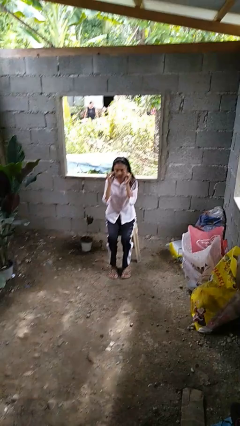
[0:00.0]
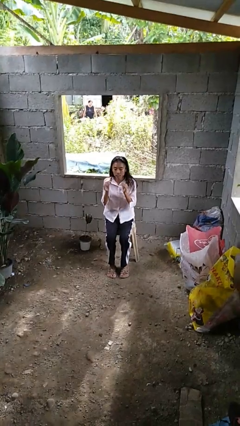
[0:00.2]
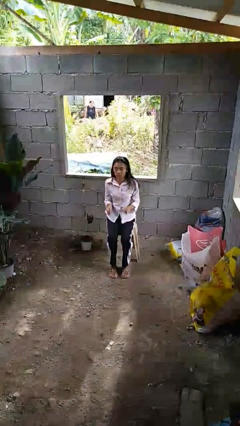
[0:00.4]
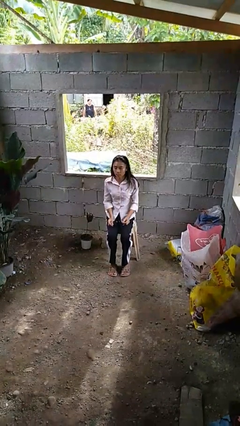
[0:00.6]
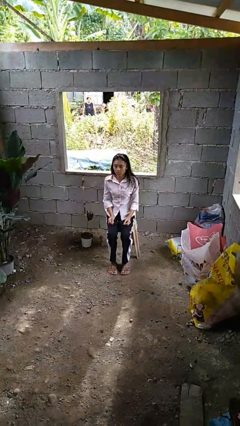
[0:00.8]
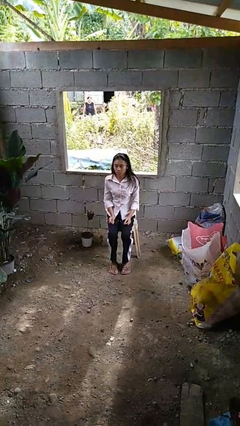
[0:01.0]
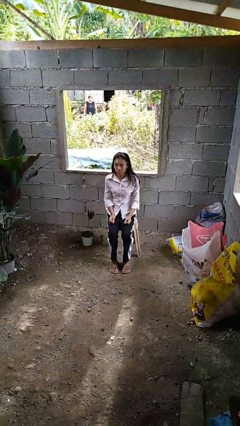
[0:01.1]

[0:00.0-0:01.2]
person takes off glasses

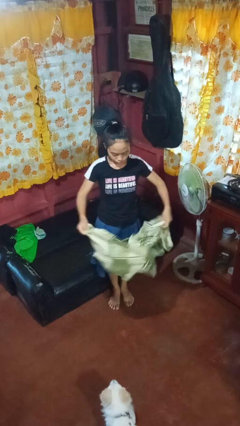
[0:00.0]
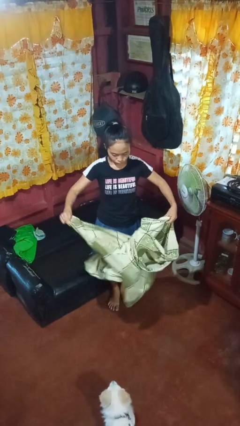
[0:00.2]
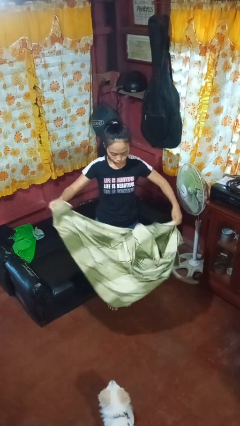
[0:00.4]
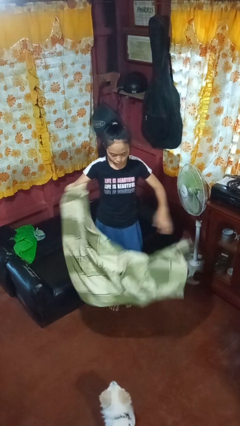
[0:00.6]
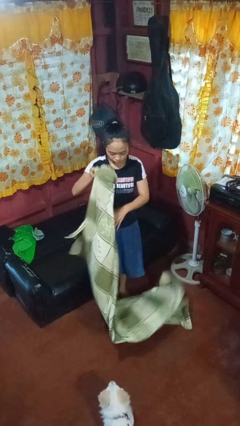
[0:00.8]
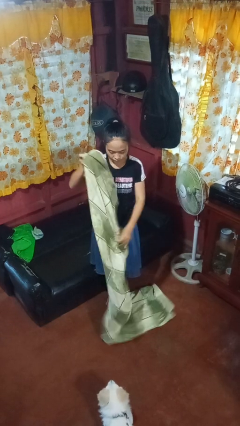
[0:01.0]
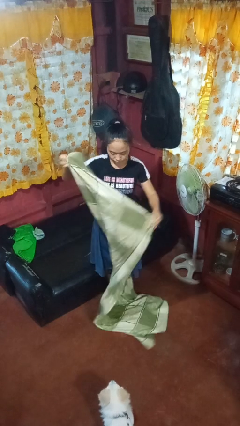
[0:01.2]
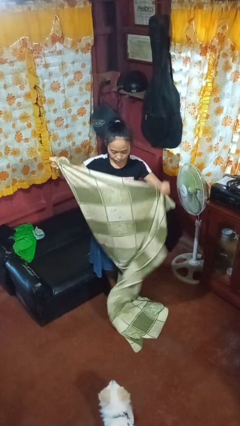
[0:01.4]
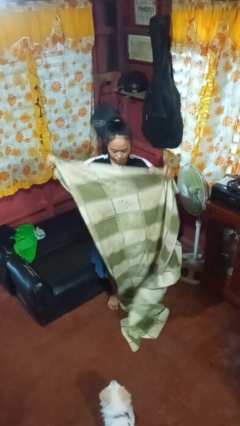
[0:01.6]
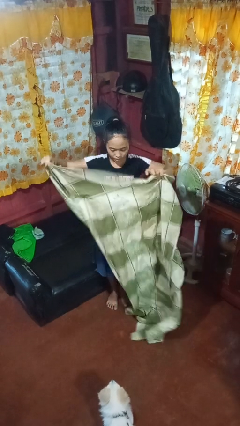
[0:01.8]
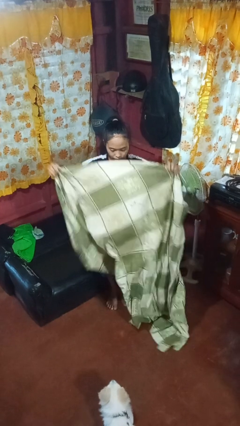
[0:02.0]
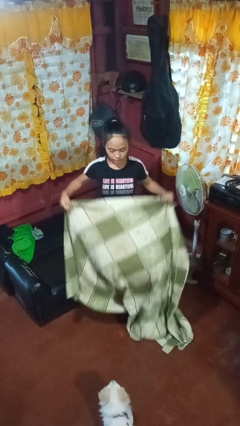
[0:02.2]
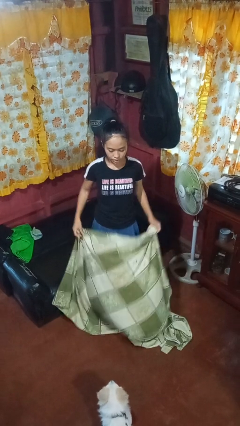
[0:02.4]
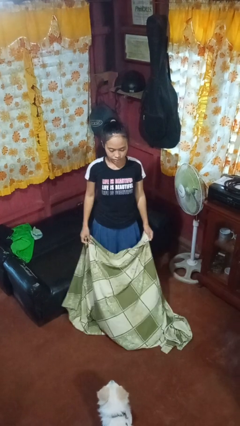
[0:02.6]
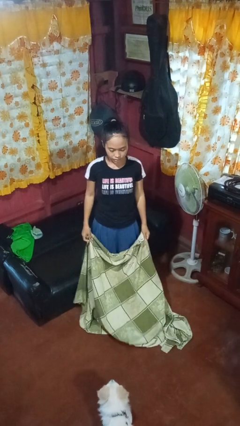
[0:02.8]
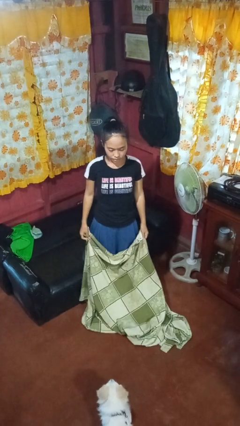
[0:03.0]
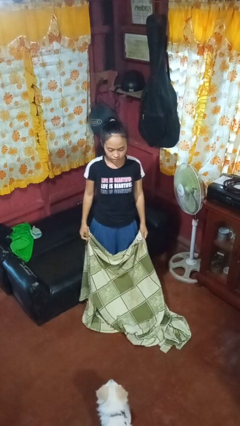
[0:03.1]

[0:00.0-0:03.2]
person unfolds blanket

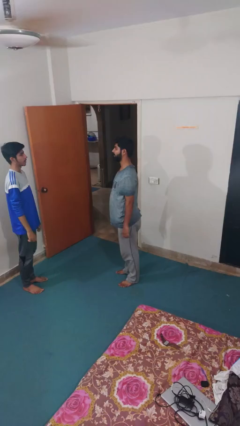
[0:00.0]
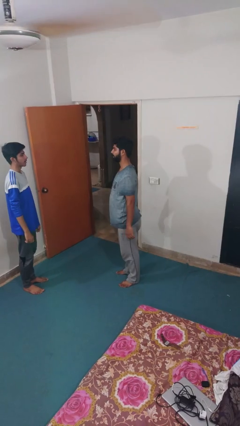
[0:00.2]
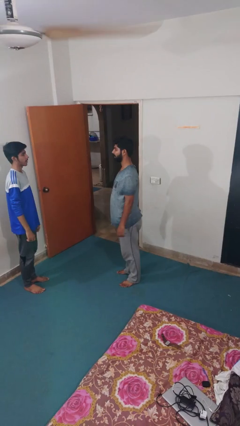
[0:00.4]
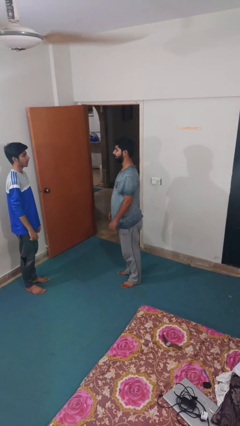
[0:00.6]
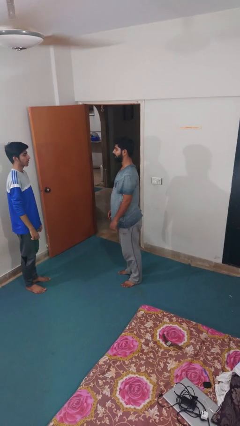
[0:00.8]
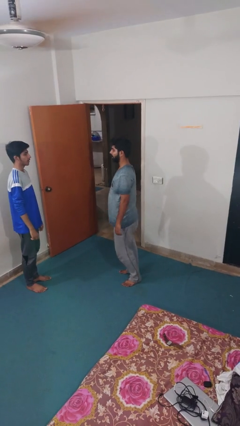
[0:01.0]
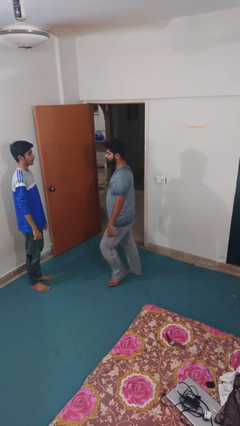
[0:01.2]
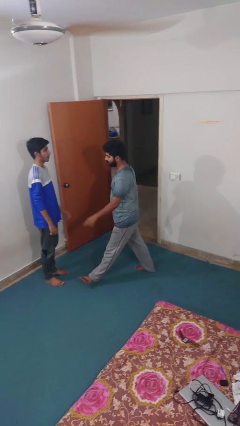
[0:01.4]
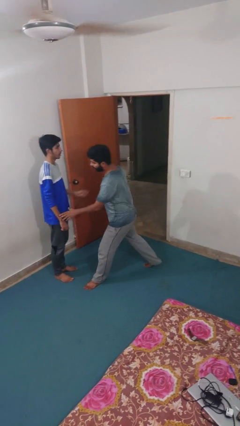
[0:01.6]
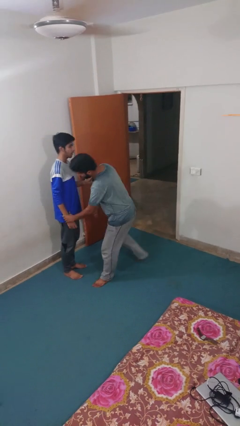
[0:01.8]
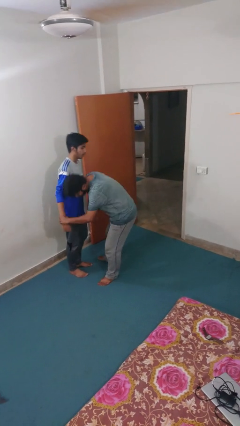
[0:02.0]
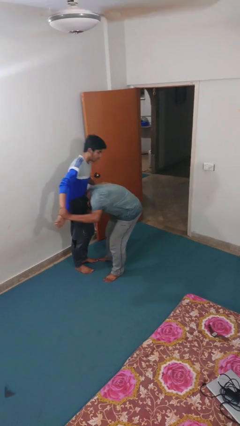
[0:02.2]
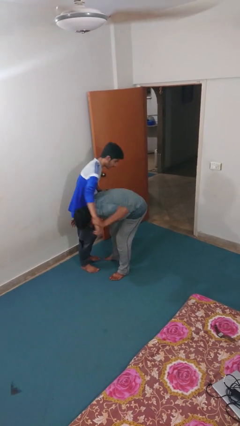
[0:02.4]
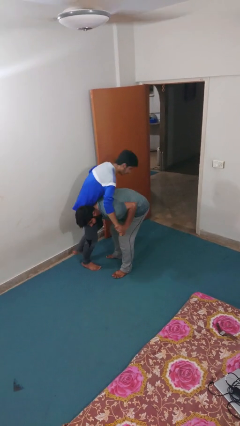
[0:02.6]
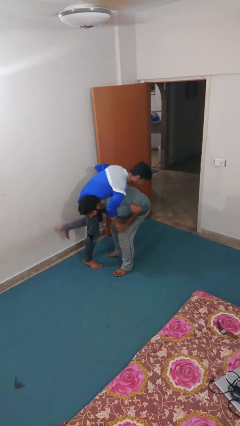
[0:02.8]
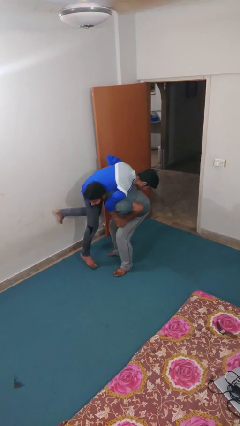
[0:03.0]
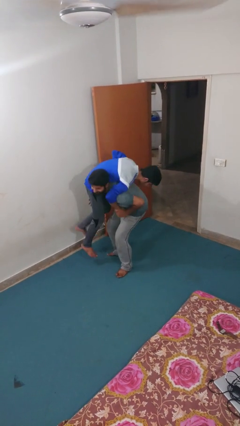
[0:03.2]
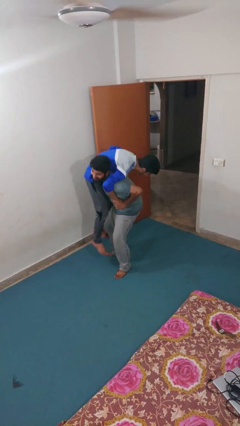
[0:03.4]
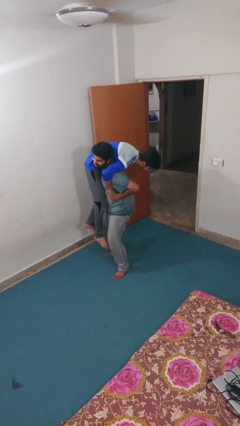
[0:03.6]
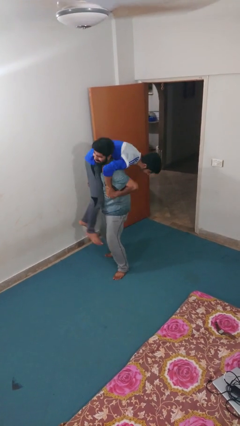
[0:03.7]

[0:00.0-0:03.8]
person carries person over shoulder

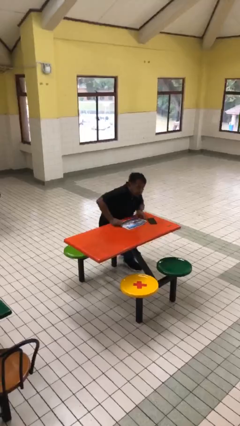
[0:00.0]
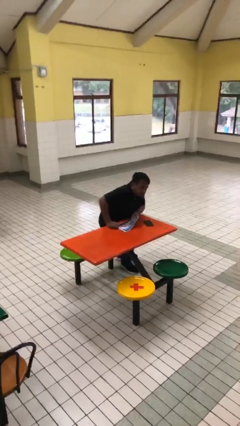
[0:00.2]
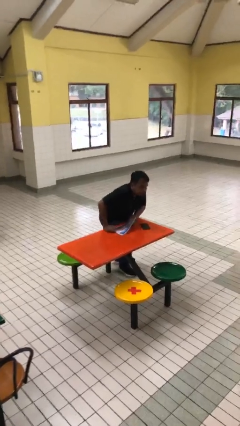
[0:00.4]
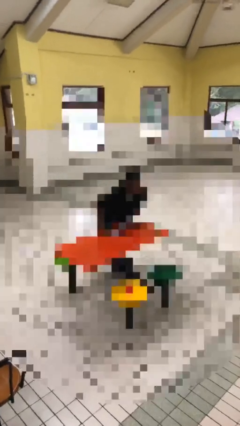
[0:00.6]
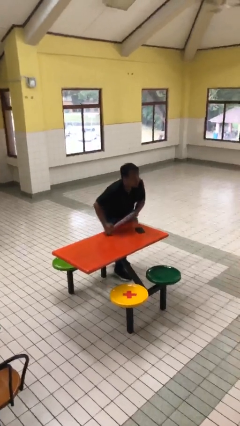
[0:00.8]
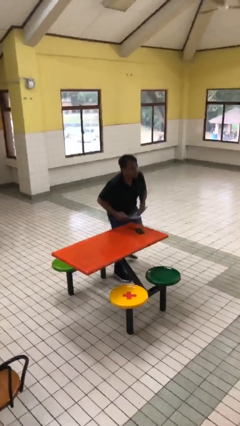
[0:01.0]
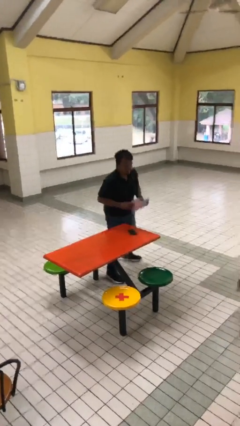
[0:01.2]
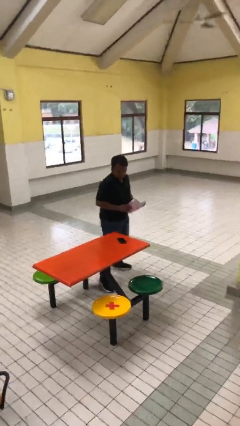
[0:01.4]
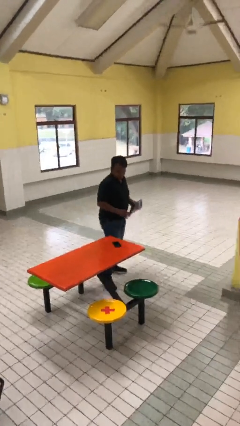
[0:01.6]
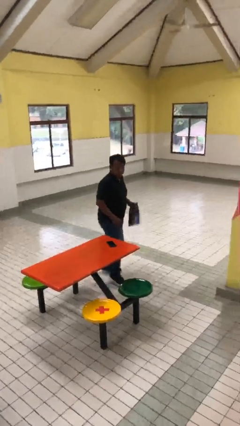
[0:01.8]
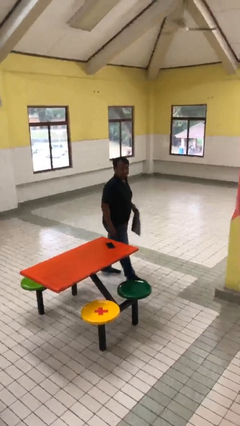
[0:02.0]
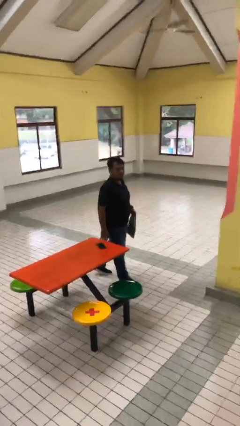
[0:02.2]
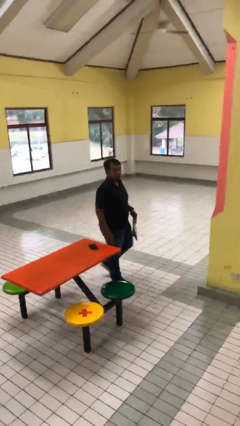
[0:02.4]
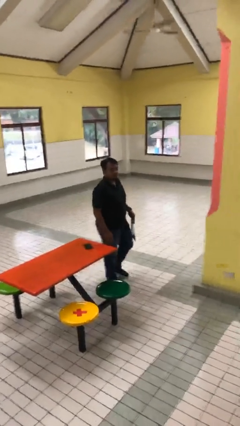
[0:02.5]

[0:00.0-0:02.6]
person stands up

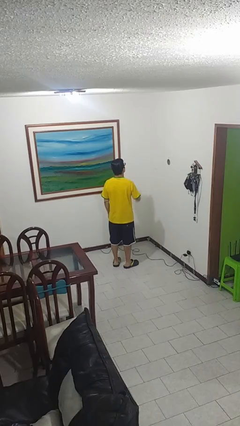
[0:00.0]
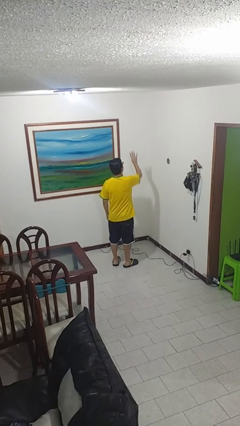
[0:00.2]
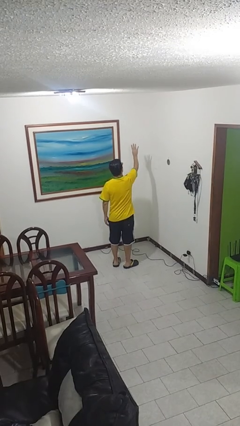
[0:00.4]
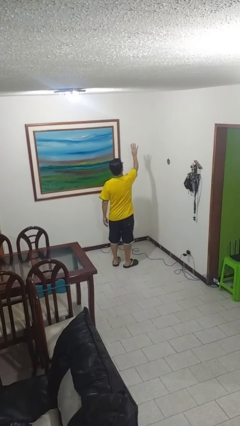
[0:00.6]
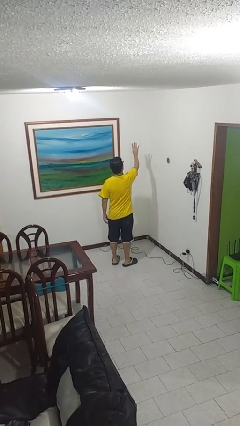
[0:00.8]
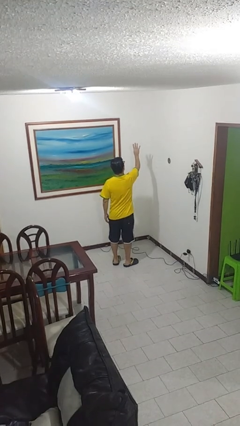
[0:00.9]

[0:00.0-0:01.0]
person gestures number four

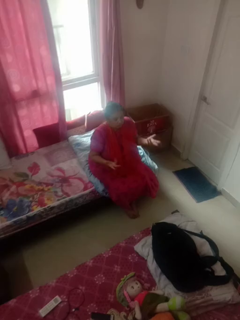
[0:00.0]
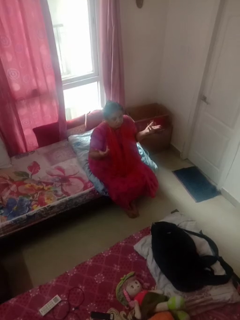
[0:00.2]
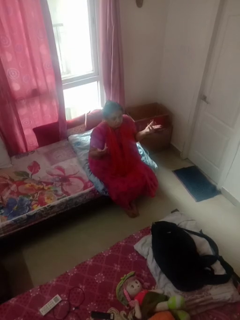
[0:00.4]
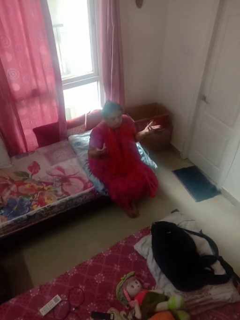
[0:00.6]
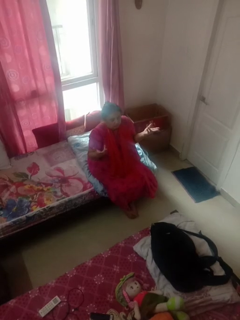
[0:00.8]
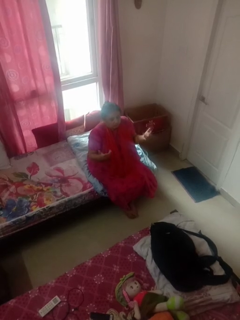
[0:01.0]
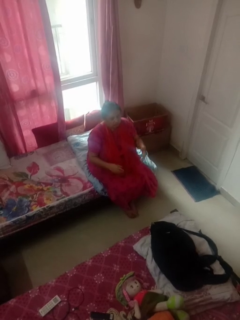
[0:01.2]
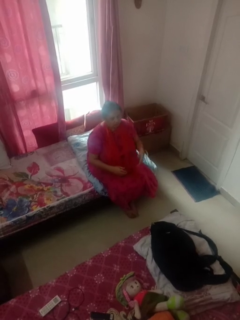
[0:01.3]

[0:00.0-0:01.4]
person shrugs

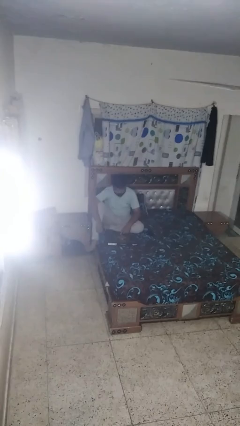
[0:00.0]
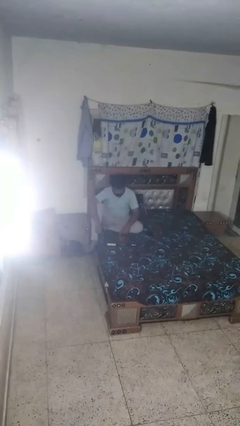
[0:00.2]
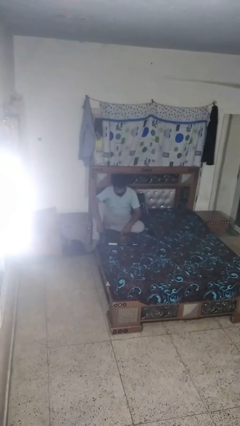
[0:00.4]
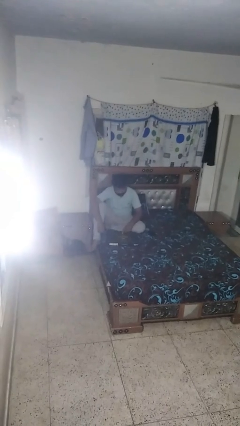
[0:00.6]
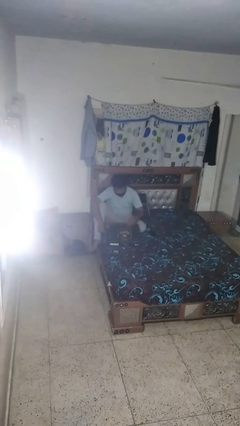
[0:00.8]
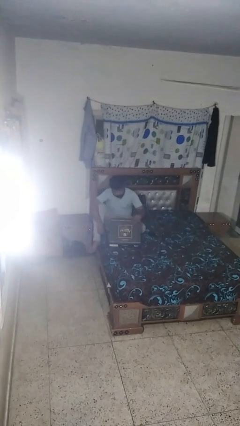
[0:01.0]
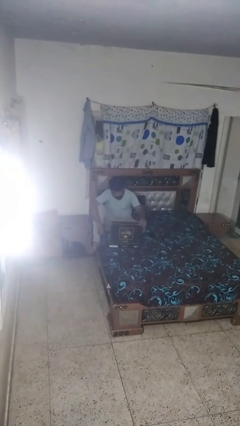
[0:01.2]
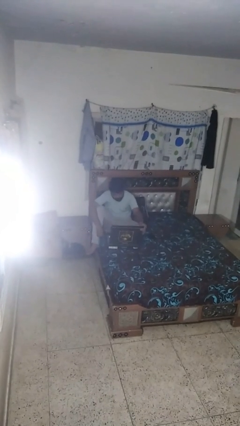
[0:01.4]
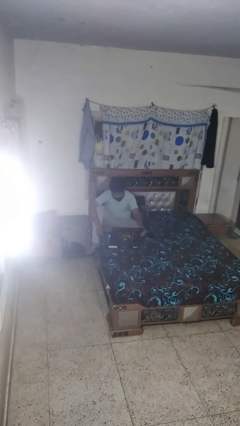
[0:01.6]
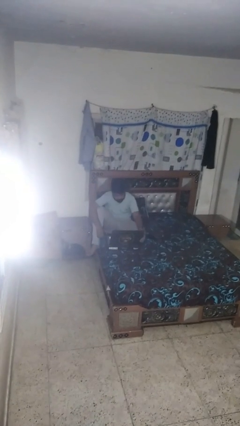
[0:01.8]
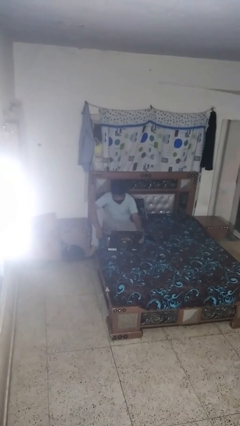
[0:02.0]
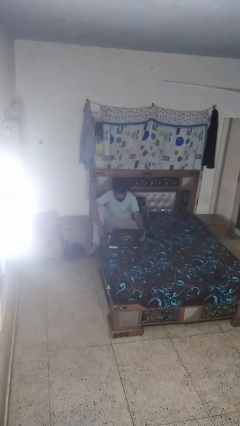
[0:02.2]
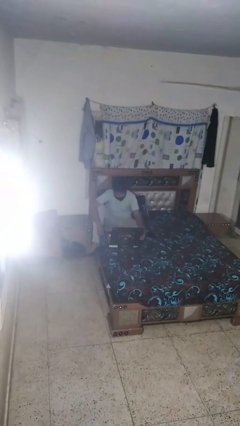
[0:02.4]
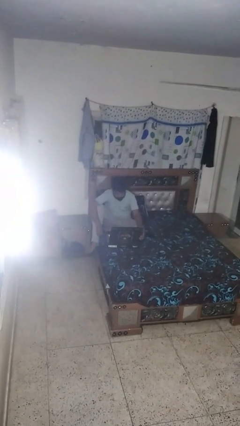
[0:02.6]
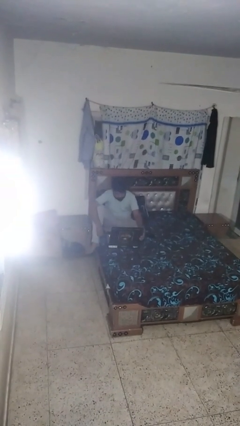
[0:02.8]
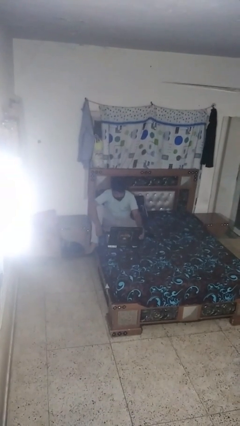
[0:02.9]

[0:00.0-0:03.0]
person opens laptop

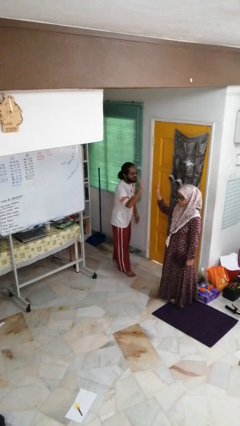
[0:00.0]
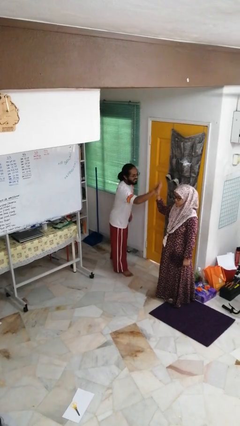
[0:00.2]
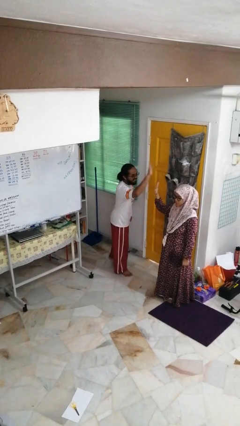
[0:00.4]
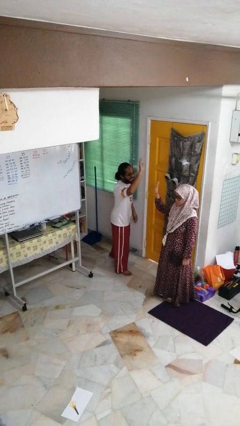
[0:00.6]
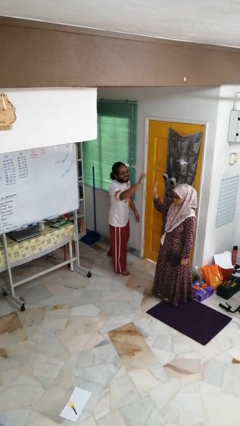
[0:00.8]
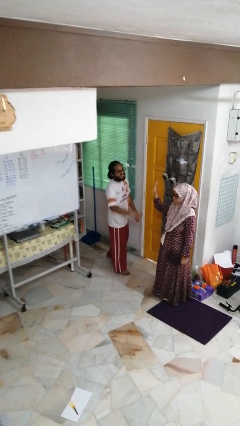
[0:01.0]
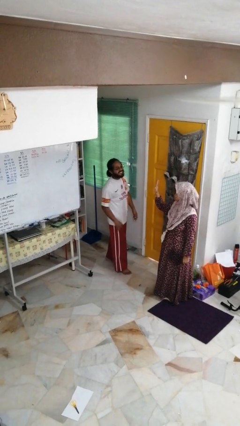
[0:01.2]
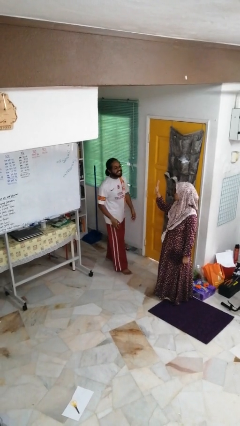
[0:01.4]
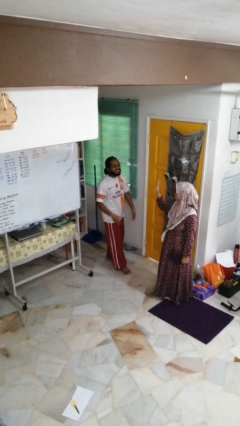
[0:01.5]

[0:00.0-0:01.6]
person highfives hand
